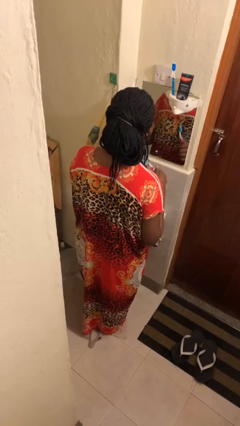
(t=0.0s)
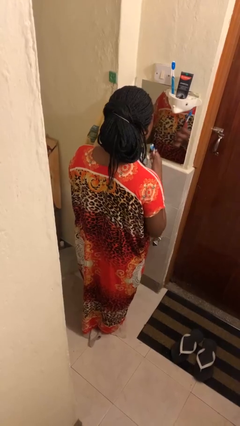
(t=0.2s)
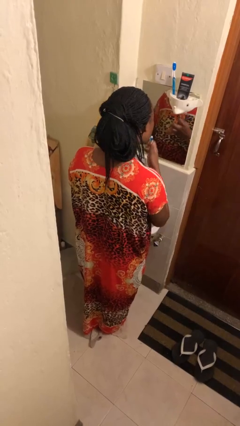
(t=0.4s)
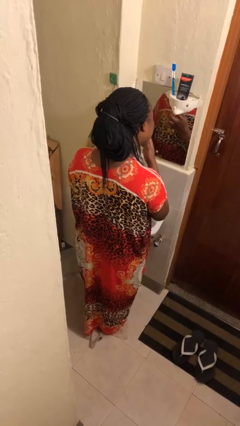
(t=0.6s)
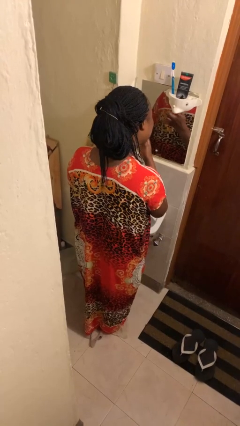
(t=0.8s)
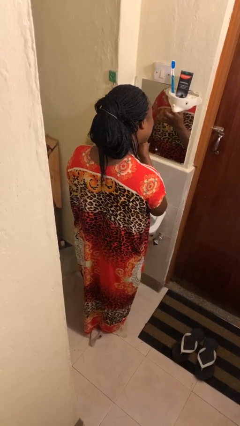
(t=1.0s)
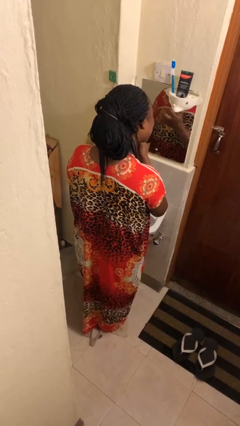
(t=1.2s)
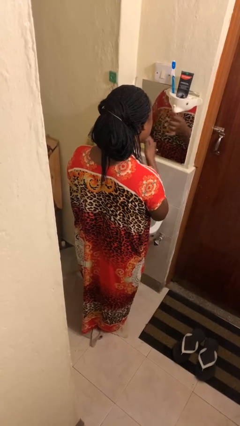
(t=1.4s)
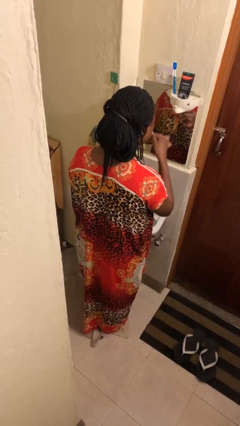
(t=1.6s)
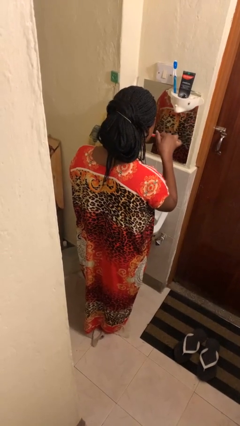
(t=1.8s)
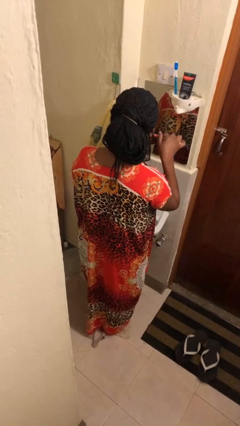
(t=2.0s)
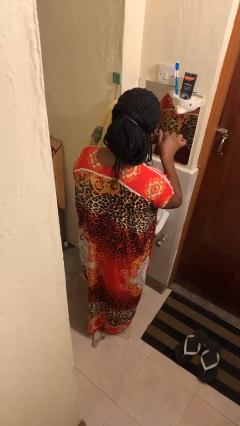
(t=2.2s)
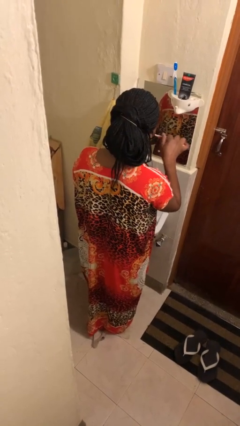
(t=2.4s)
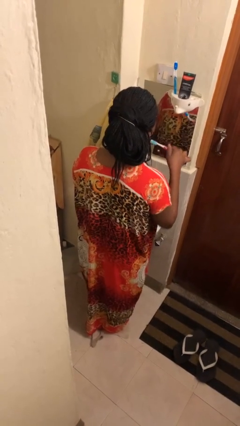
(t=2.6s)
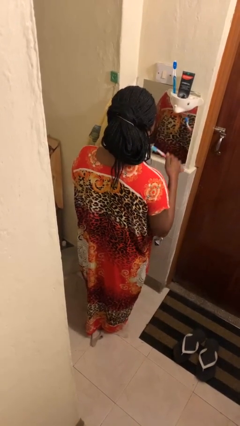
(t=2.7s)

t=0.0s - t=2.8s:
person brushes teeth

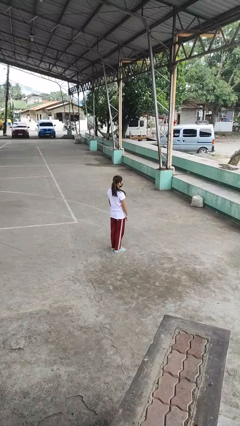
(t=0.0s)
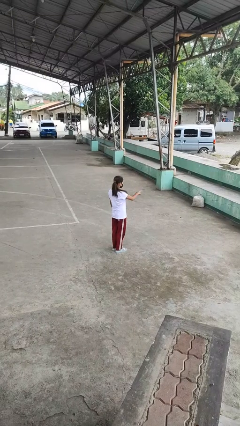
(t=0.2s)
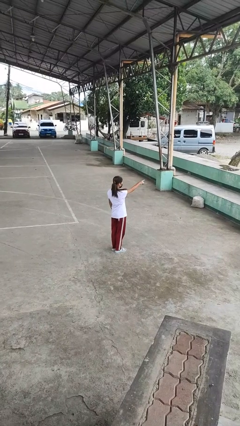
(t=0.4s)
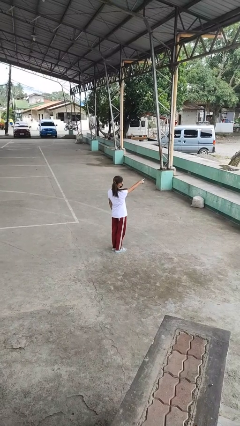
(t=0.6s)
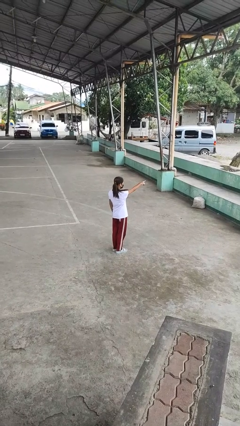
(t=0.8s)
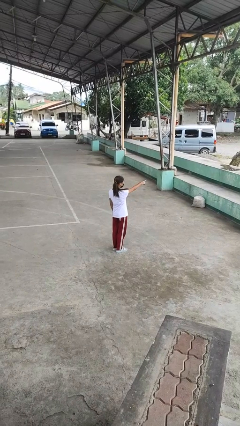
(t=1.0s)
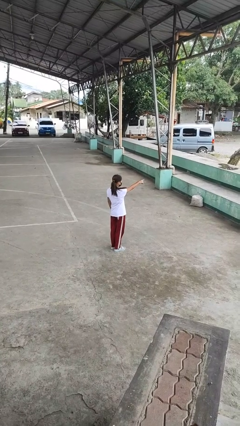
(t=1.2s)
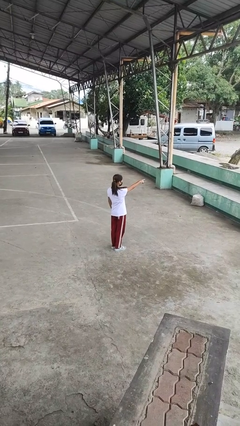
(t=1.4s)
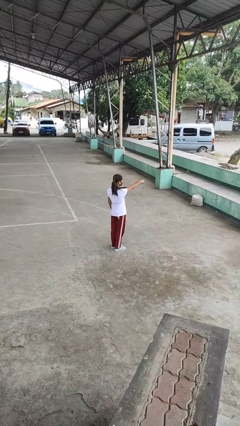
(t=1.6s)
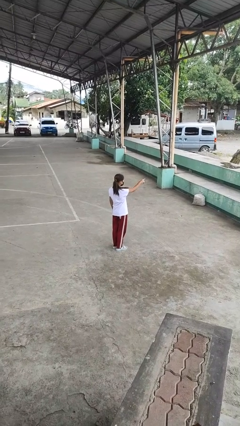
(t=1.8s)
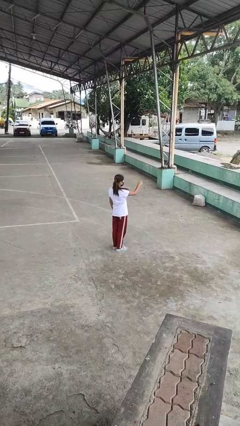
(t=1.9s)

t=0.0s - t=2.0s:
person points at person

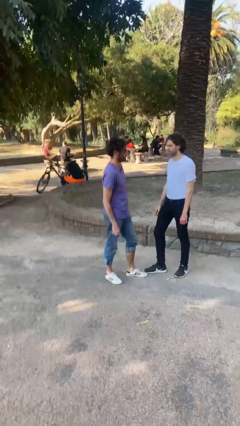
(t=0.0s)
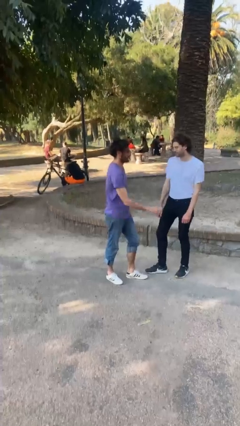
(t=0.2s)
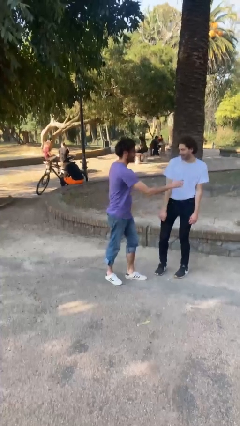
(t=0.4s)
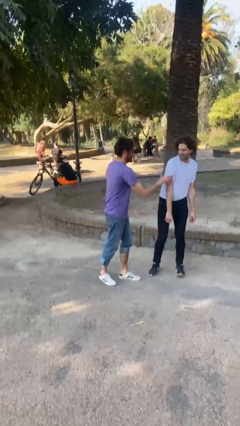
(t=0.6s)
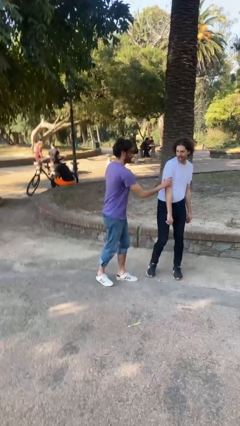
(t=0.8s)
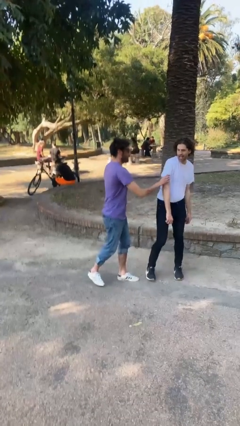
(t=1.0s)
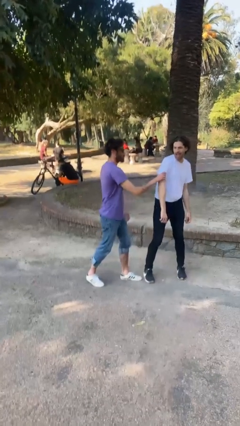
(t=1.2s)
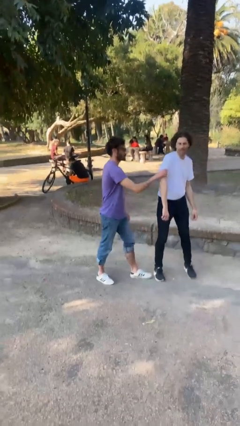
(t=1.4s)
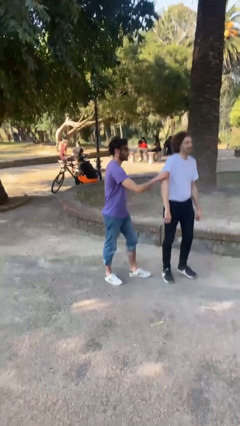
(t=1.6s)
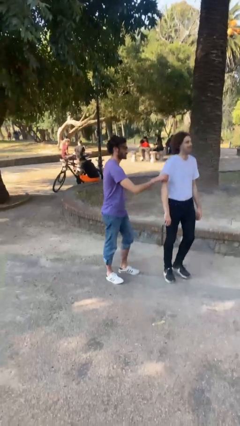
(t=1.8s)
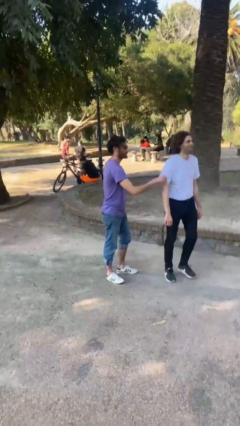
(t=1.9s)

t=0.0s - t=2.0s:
person grabs person by bicep

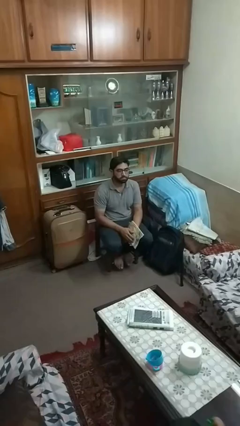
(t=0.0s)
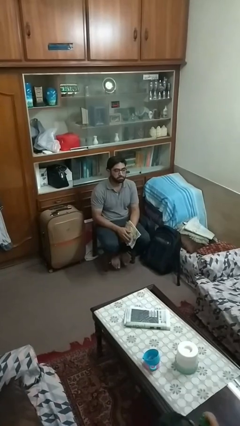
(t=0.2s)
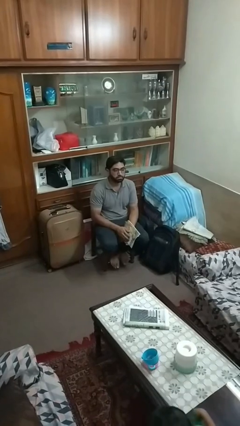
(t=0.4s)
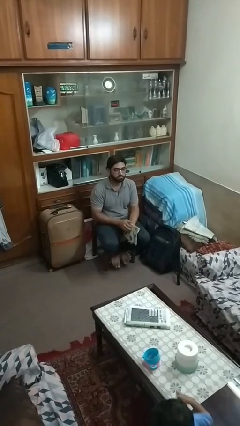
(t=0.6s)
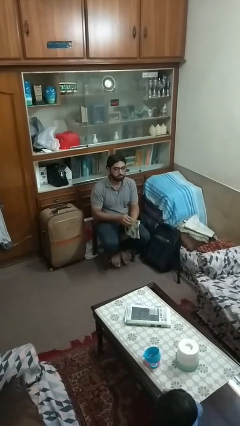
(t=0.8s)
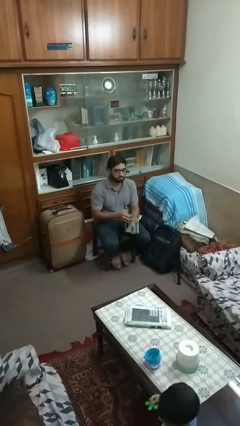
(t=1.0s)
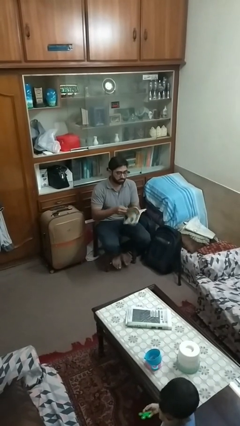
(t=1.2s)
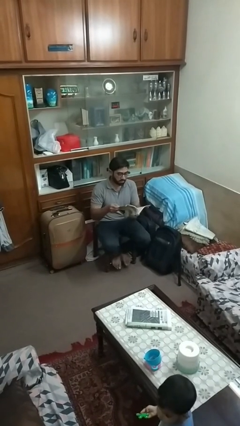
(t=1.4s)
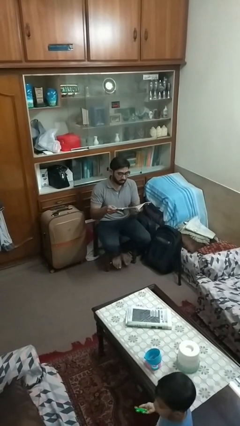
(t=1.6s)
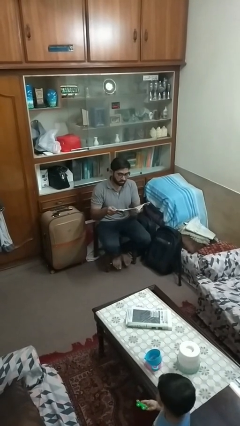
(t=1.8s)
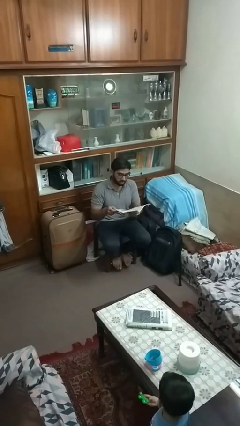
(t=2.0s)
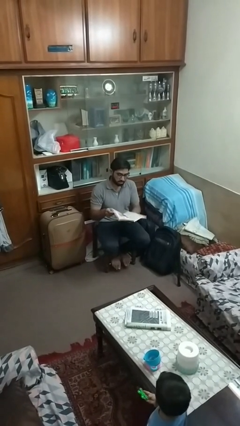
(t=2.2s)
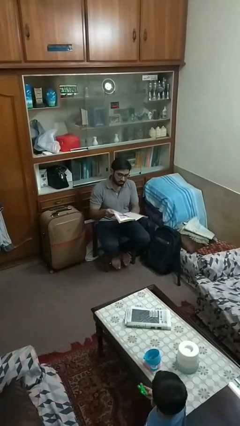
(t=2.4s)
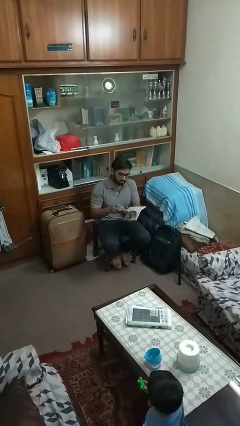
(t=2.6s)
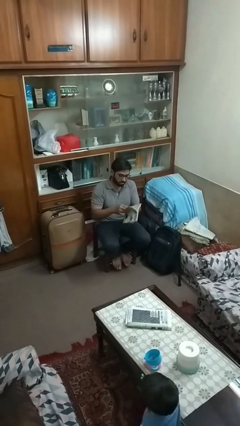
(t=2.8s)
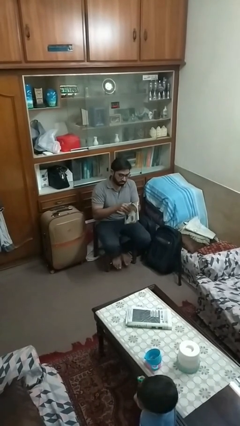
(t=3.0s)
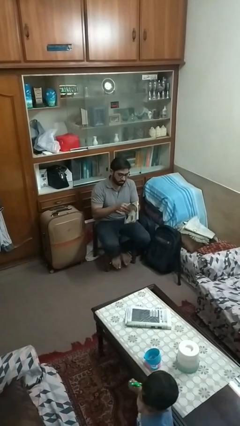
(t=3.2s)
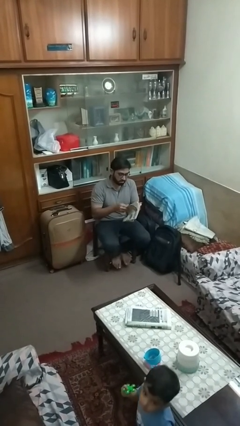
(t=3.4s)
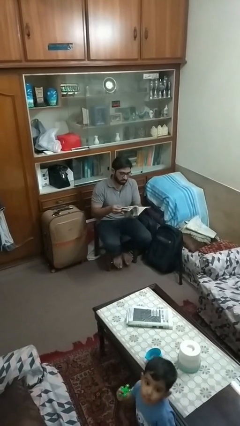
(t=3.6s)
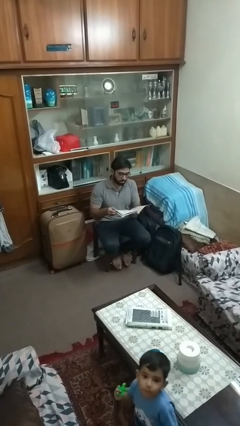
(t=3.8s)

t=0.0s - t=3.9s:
person reads magazine

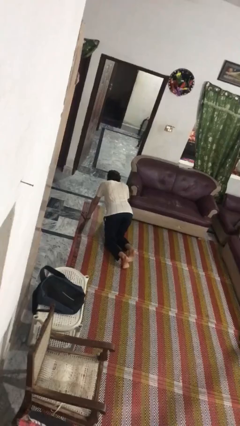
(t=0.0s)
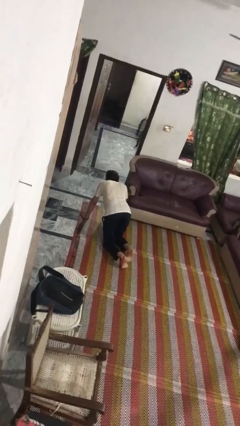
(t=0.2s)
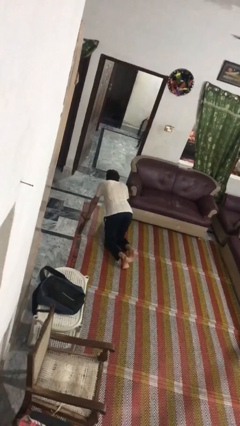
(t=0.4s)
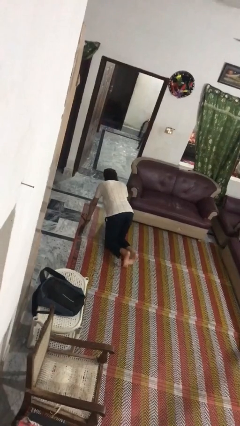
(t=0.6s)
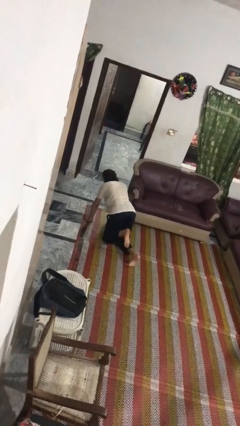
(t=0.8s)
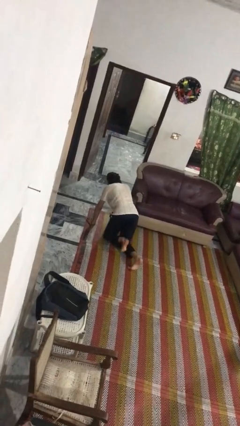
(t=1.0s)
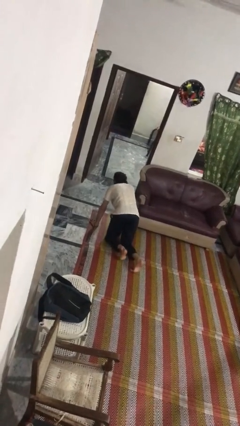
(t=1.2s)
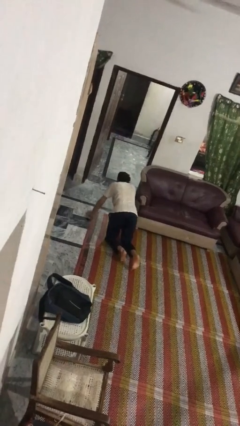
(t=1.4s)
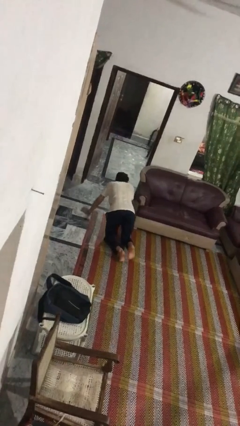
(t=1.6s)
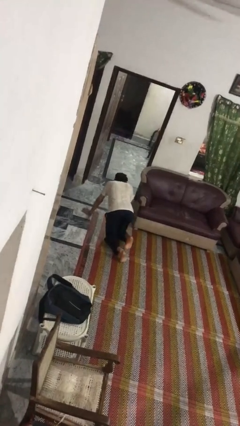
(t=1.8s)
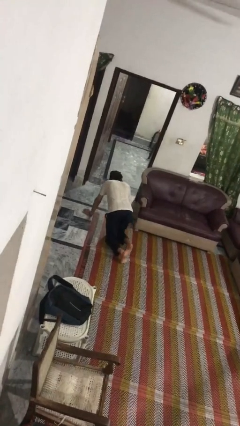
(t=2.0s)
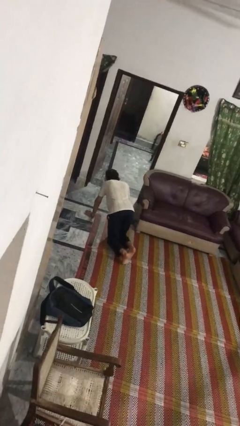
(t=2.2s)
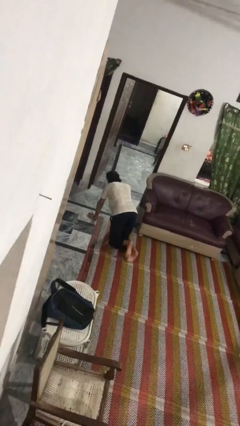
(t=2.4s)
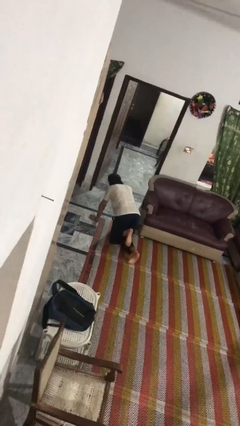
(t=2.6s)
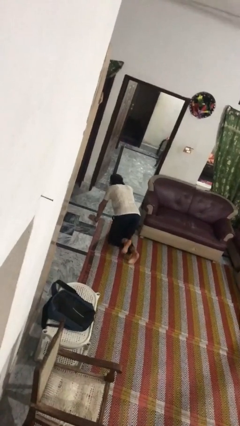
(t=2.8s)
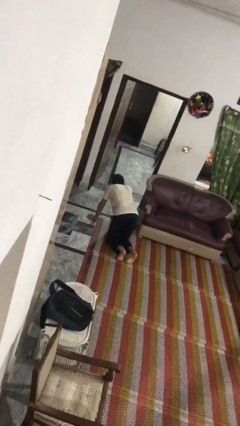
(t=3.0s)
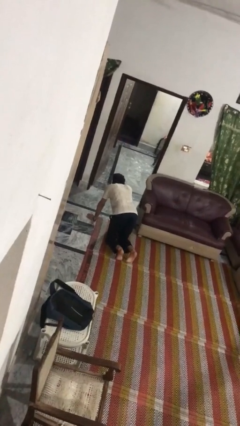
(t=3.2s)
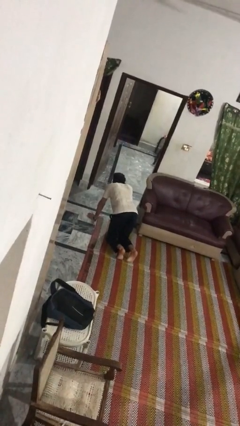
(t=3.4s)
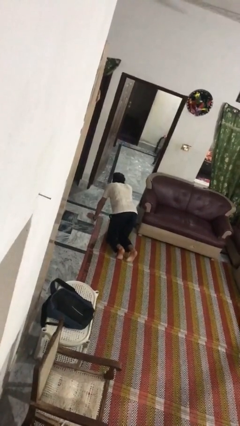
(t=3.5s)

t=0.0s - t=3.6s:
person crawls

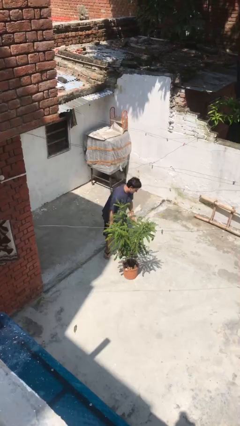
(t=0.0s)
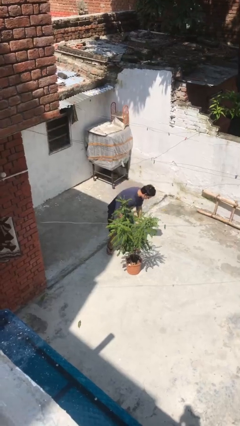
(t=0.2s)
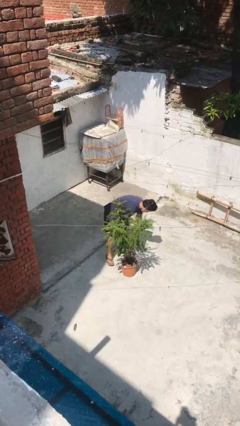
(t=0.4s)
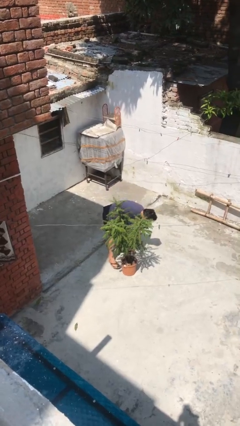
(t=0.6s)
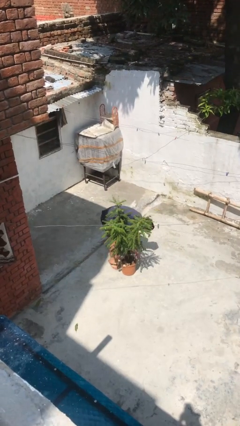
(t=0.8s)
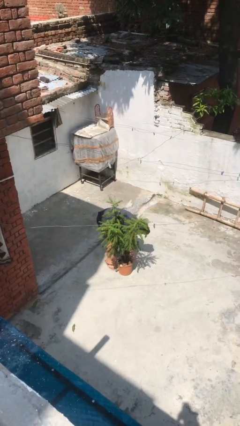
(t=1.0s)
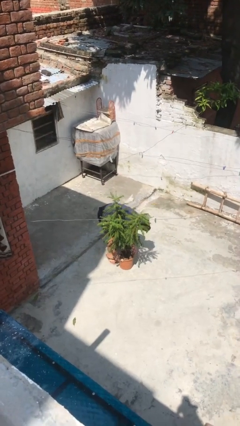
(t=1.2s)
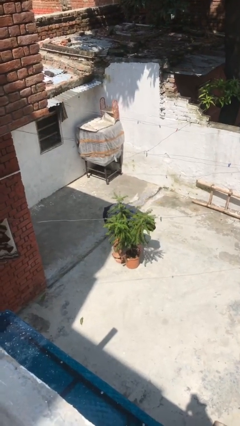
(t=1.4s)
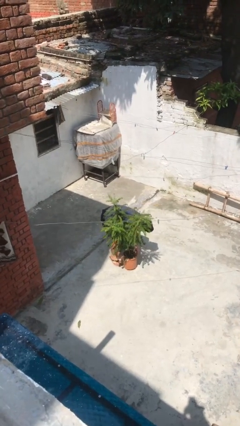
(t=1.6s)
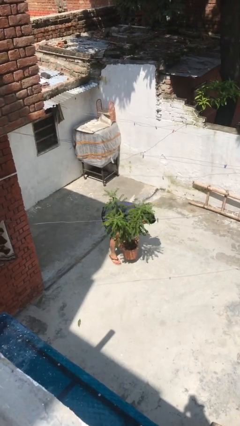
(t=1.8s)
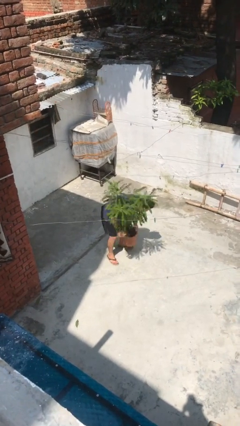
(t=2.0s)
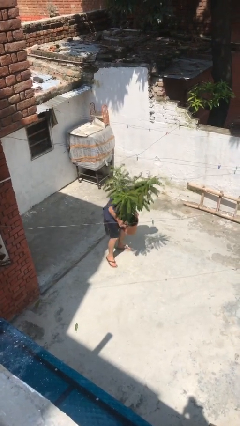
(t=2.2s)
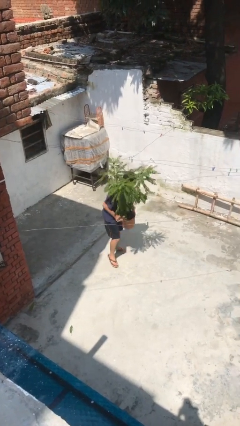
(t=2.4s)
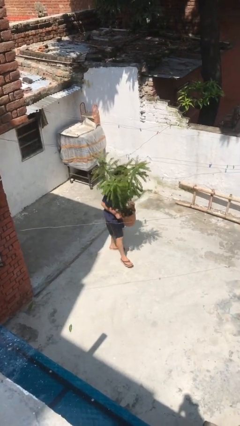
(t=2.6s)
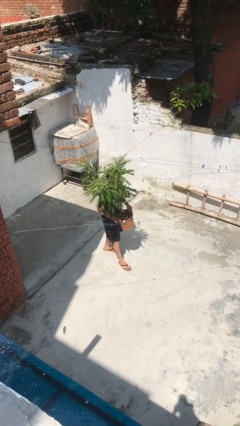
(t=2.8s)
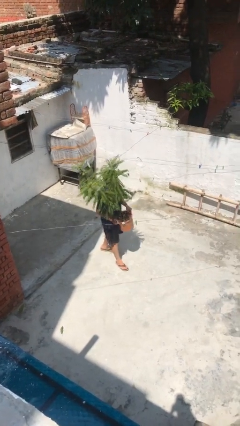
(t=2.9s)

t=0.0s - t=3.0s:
person picks up object from floor
